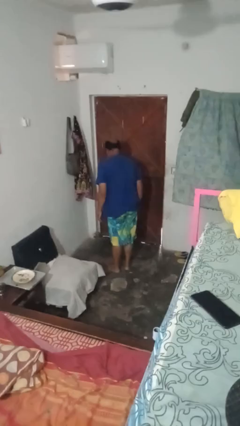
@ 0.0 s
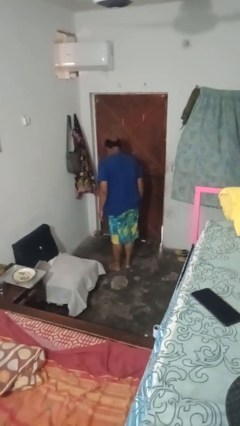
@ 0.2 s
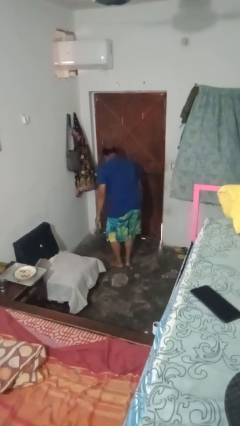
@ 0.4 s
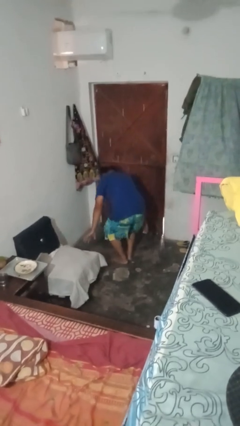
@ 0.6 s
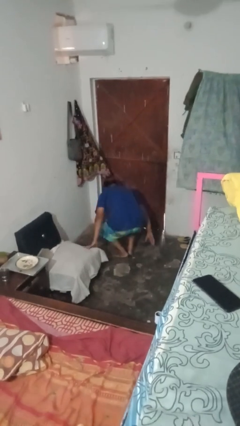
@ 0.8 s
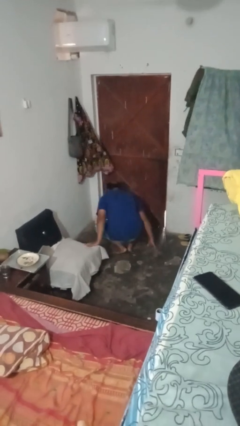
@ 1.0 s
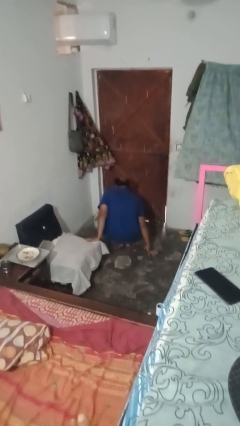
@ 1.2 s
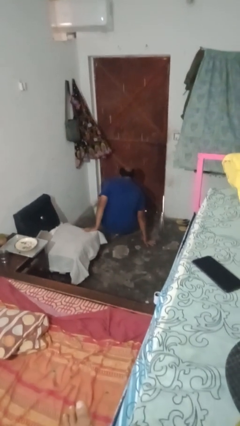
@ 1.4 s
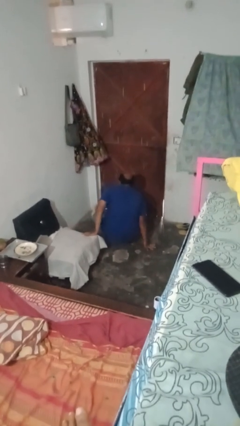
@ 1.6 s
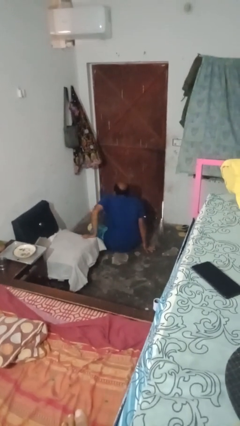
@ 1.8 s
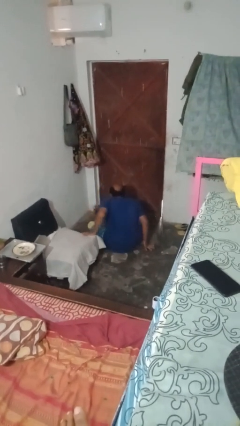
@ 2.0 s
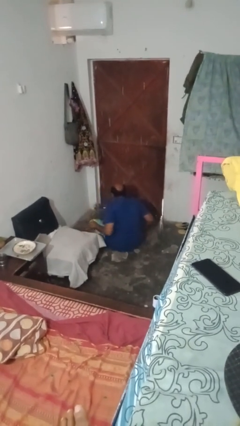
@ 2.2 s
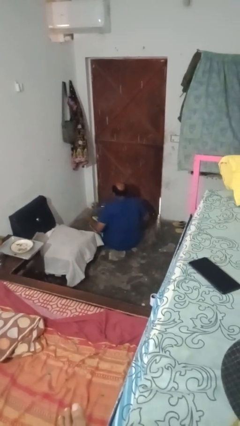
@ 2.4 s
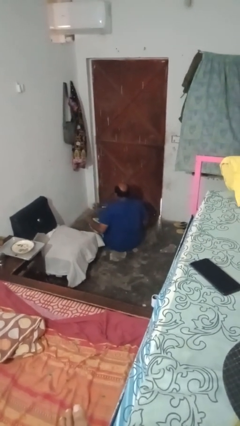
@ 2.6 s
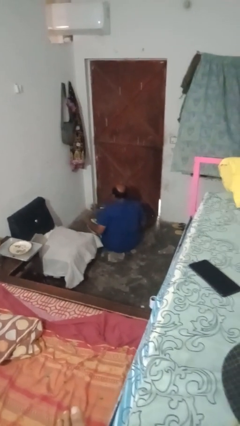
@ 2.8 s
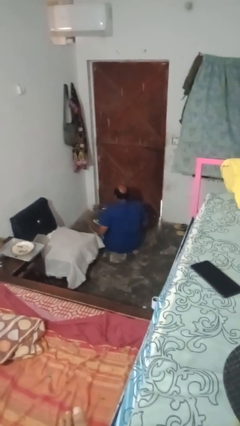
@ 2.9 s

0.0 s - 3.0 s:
person crosses legs

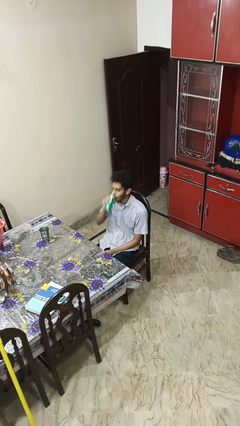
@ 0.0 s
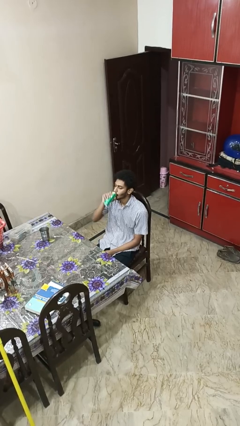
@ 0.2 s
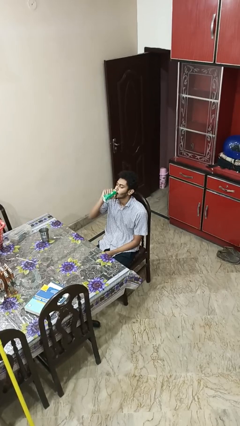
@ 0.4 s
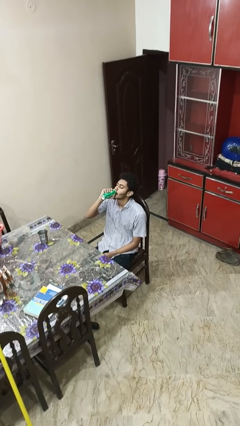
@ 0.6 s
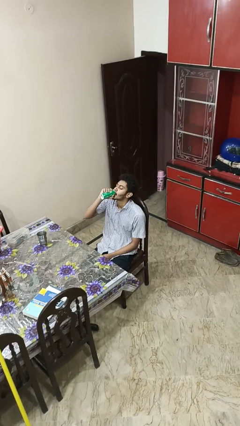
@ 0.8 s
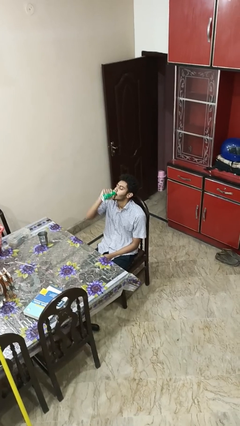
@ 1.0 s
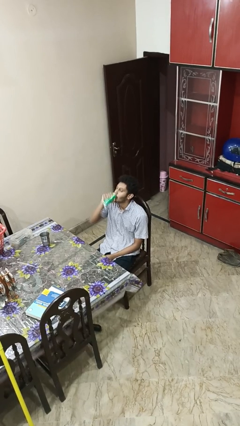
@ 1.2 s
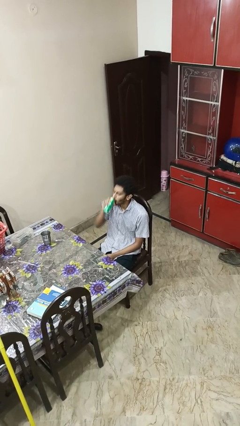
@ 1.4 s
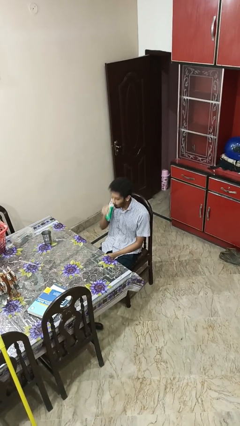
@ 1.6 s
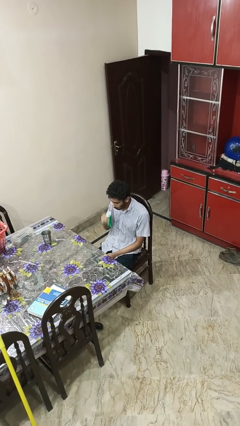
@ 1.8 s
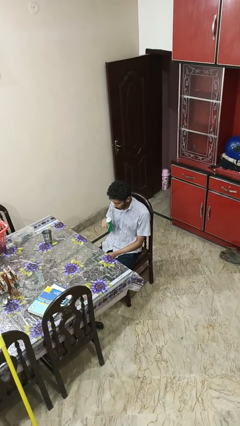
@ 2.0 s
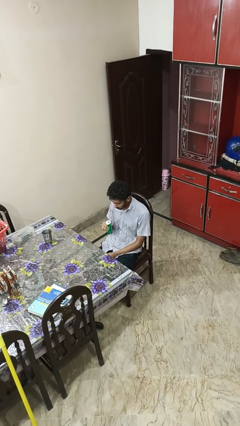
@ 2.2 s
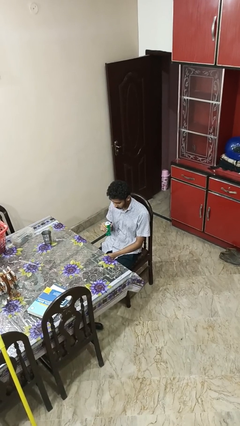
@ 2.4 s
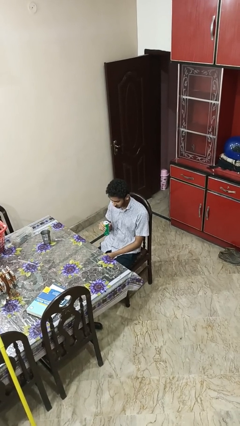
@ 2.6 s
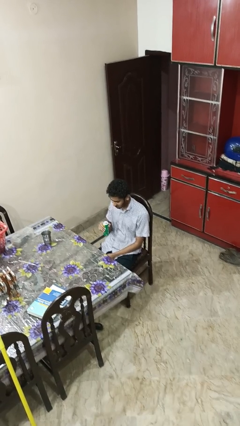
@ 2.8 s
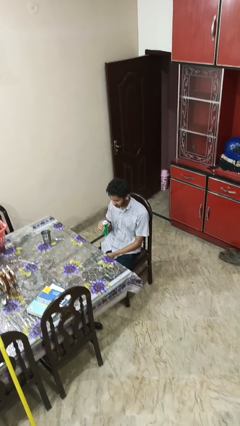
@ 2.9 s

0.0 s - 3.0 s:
person drinks from beverage can

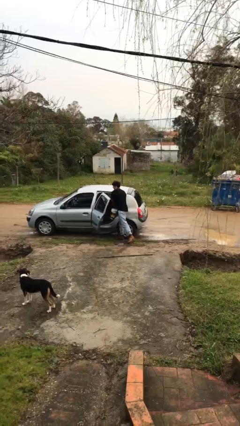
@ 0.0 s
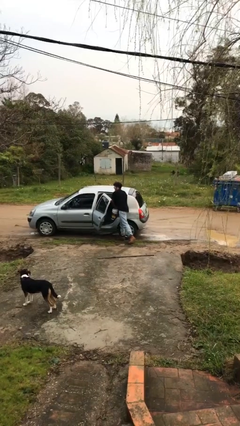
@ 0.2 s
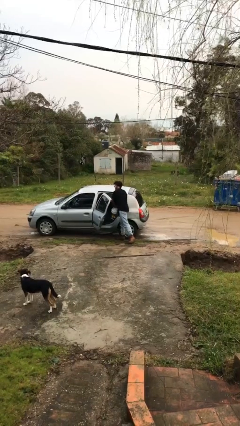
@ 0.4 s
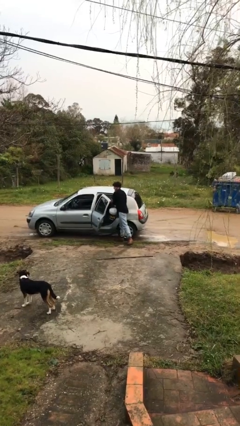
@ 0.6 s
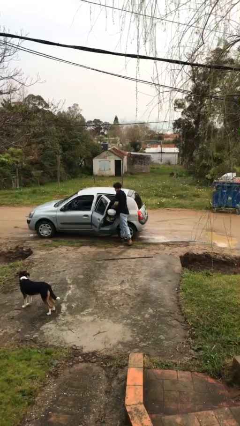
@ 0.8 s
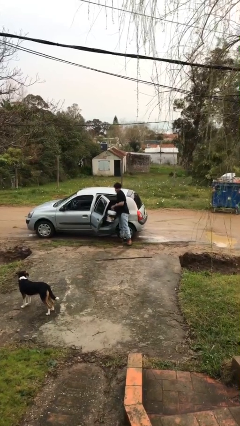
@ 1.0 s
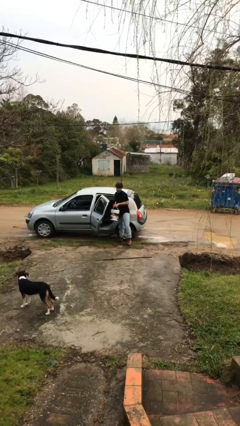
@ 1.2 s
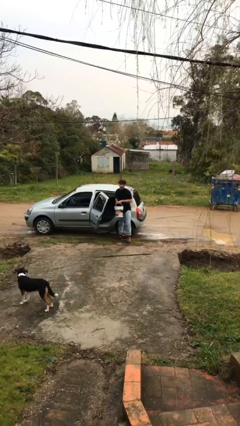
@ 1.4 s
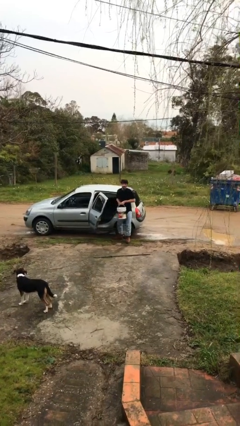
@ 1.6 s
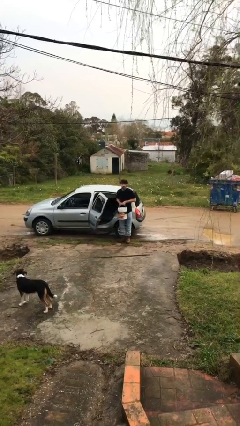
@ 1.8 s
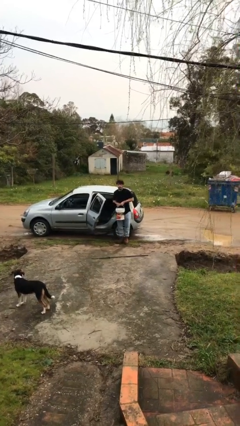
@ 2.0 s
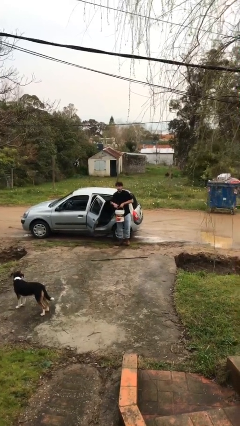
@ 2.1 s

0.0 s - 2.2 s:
person unloads car

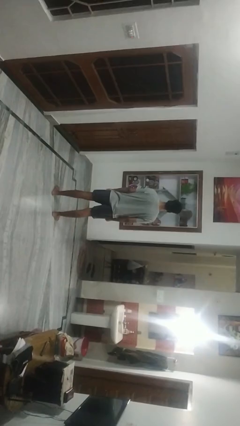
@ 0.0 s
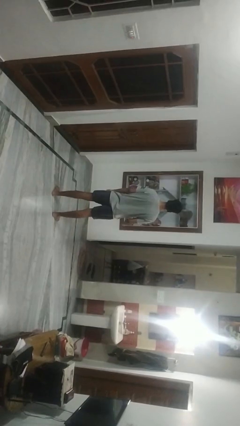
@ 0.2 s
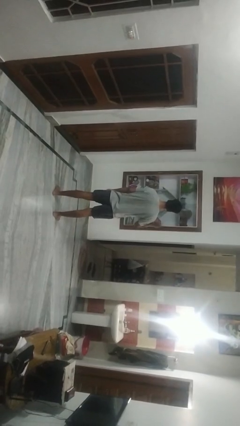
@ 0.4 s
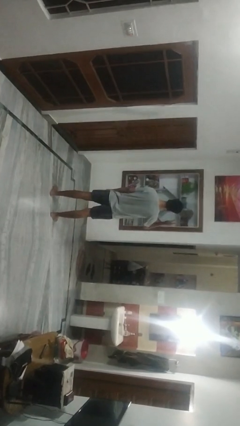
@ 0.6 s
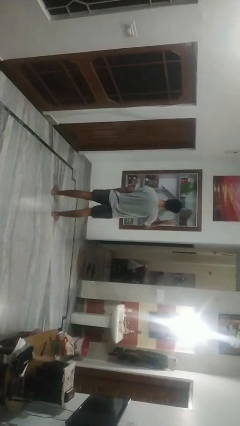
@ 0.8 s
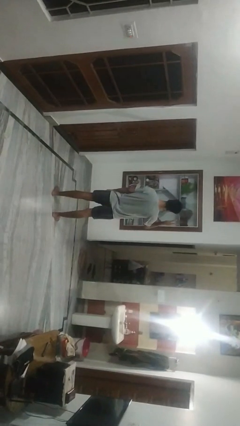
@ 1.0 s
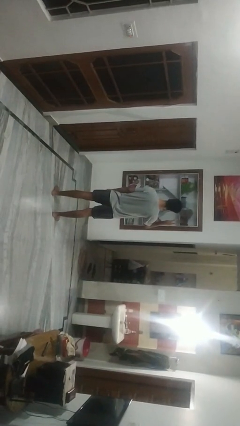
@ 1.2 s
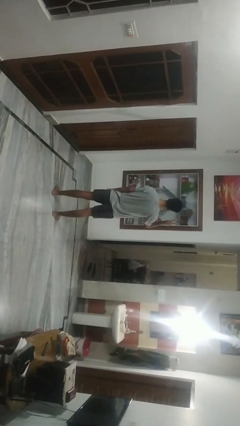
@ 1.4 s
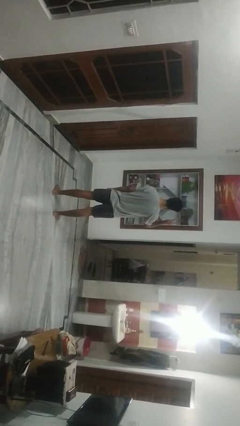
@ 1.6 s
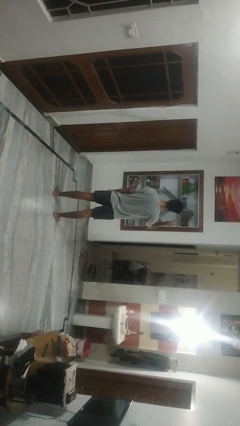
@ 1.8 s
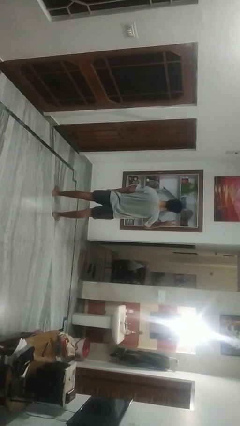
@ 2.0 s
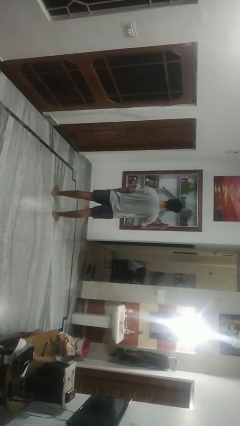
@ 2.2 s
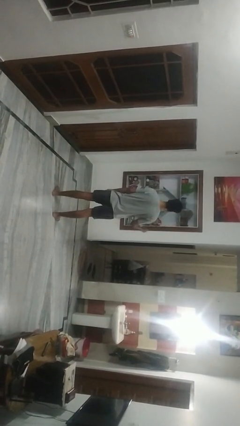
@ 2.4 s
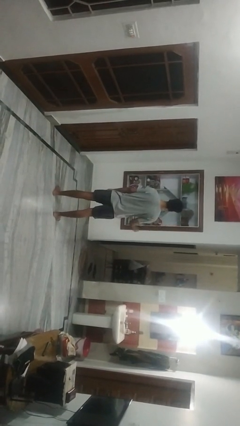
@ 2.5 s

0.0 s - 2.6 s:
person gestures peace

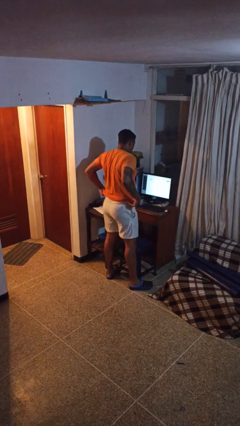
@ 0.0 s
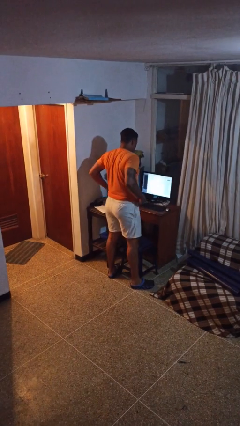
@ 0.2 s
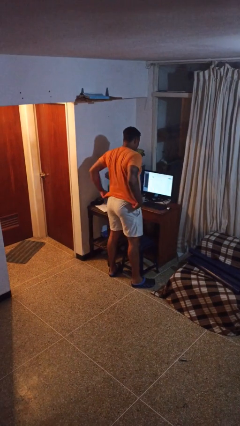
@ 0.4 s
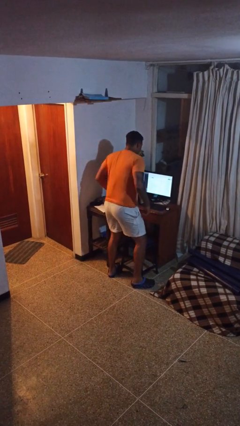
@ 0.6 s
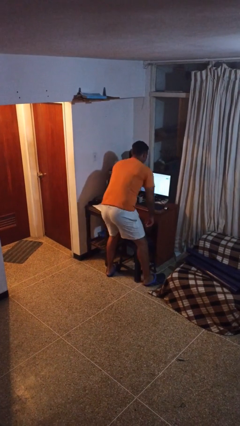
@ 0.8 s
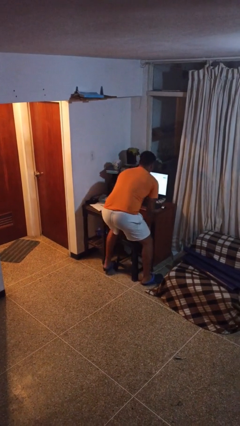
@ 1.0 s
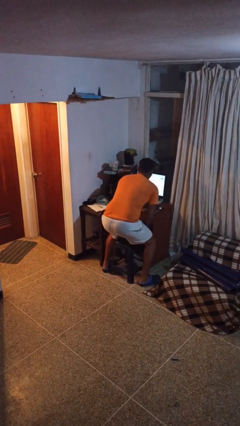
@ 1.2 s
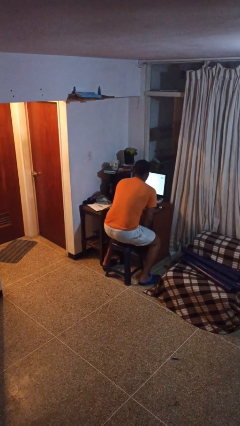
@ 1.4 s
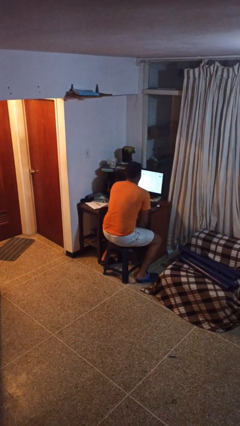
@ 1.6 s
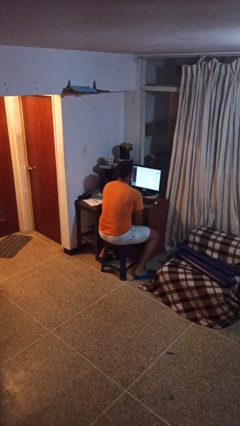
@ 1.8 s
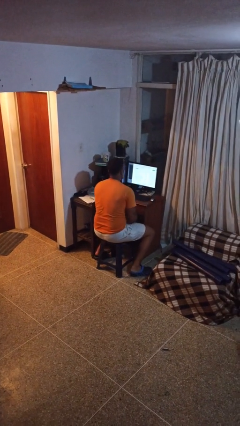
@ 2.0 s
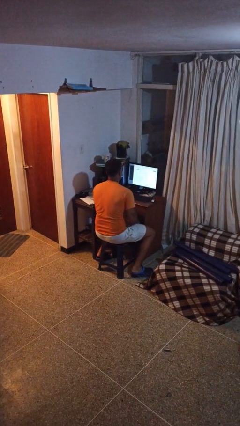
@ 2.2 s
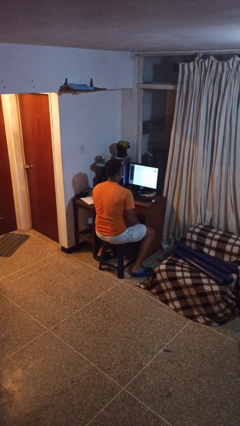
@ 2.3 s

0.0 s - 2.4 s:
person sits down

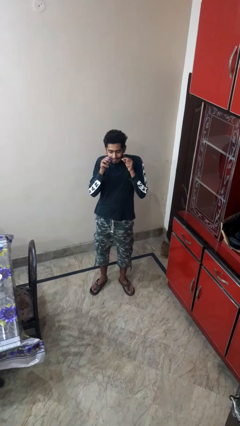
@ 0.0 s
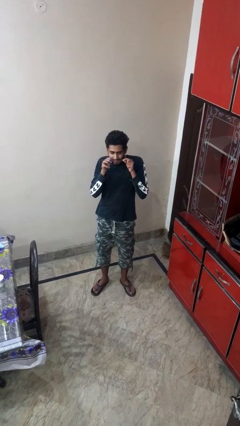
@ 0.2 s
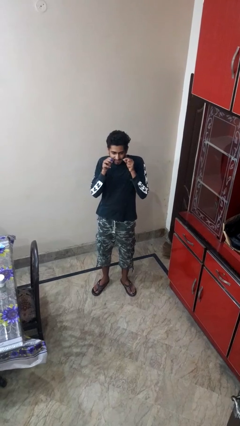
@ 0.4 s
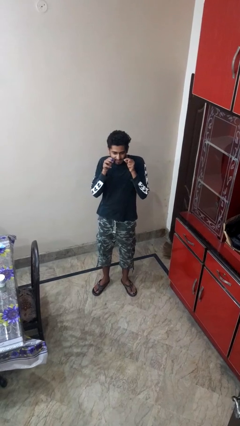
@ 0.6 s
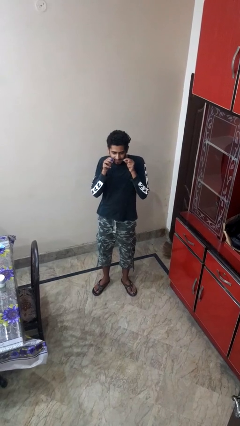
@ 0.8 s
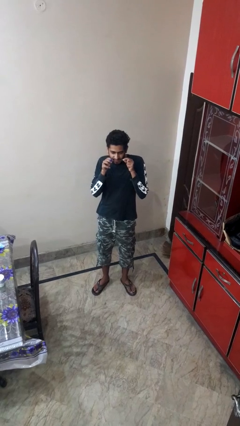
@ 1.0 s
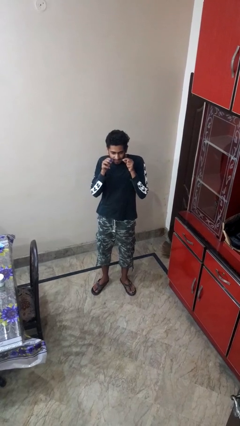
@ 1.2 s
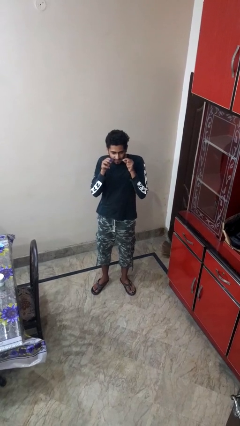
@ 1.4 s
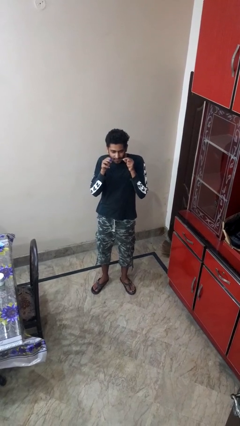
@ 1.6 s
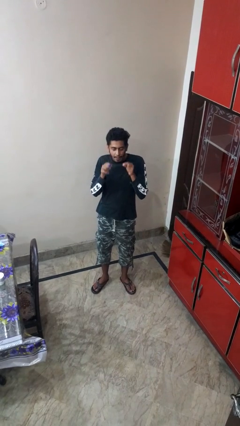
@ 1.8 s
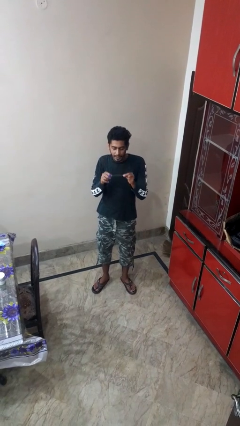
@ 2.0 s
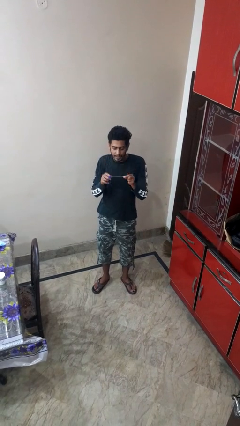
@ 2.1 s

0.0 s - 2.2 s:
person flosses

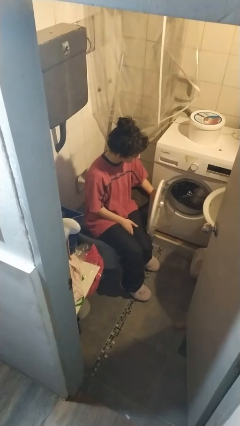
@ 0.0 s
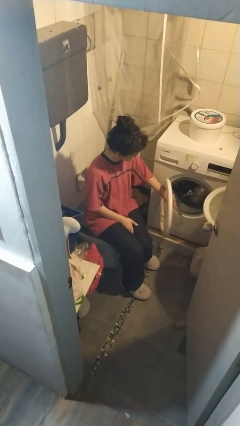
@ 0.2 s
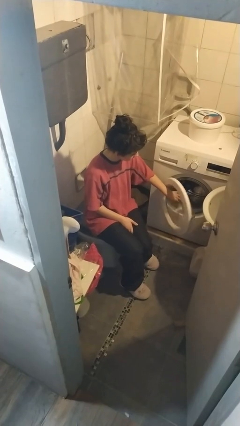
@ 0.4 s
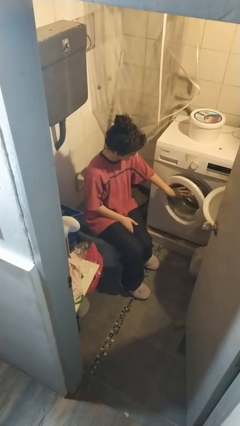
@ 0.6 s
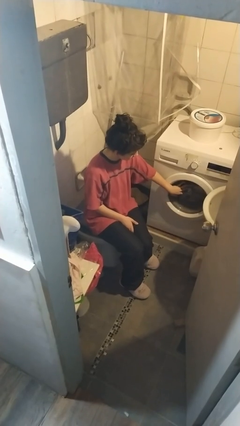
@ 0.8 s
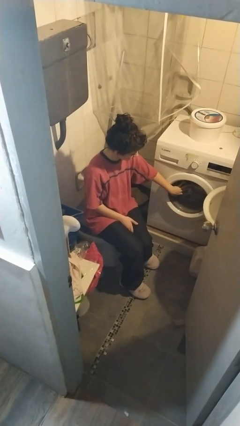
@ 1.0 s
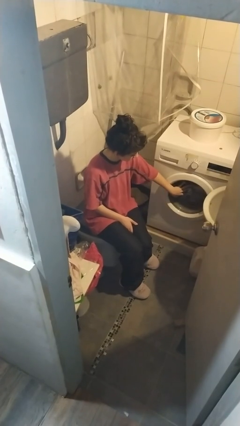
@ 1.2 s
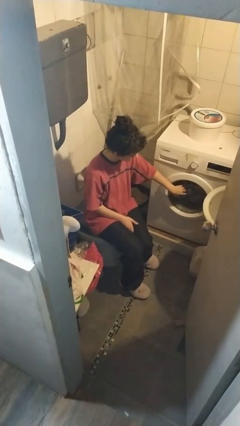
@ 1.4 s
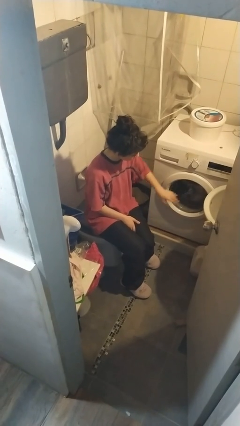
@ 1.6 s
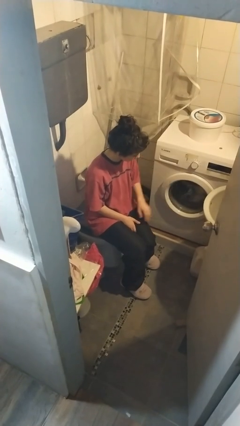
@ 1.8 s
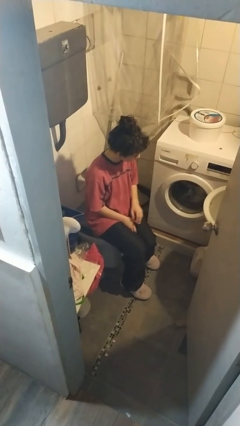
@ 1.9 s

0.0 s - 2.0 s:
person closes clothes washer
